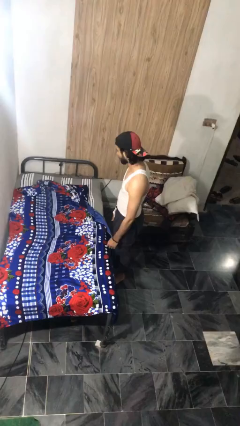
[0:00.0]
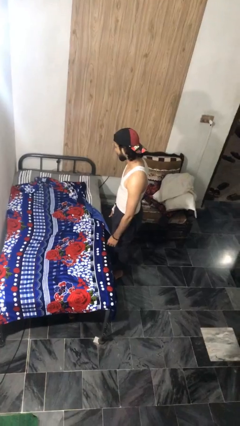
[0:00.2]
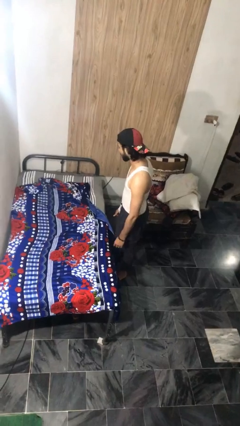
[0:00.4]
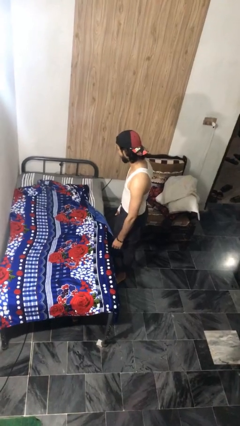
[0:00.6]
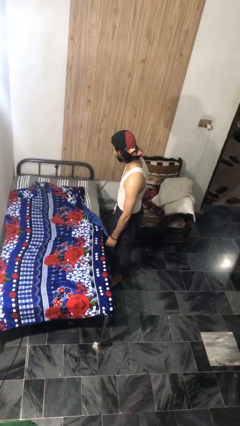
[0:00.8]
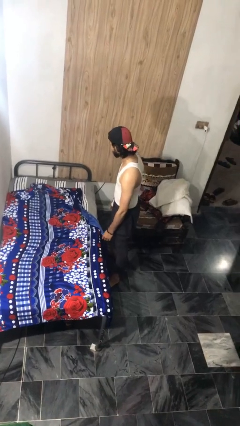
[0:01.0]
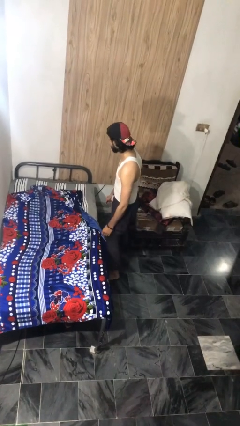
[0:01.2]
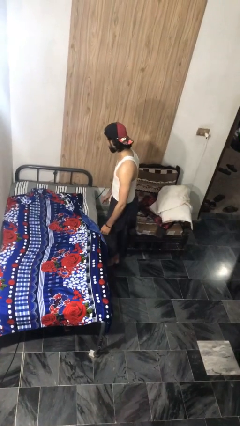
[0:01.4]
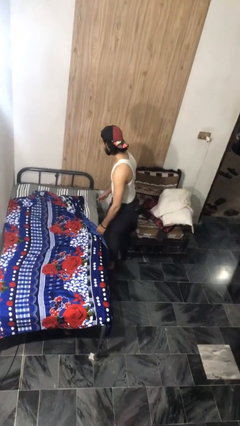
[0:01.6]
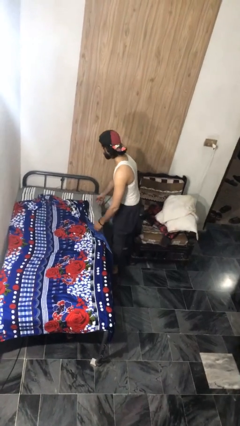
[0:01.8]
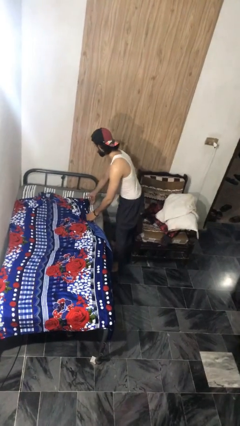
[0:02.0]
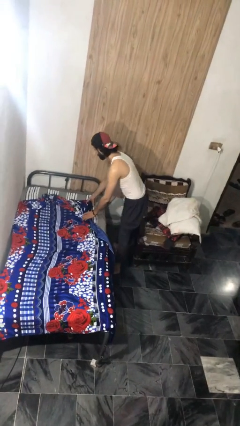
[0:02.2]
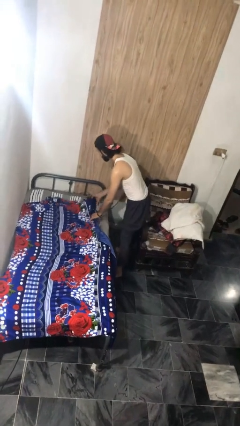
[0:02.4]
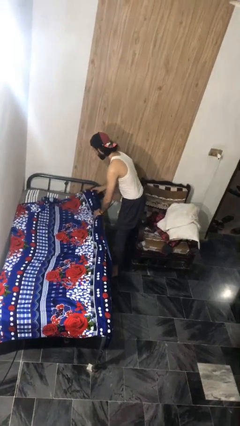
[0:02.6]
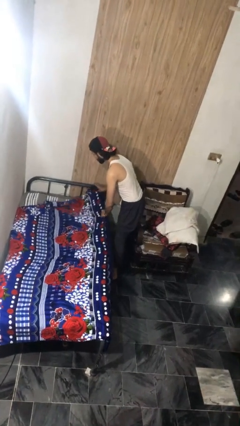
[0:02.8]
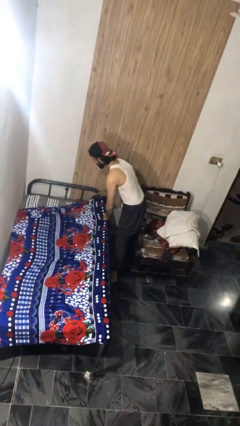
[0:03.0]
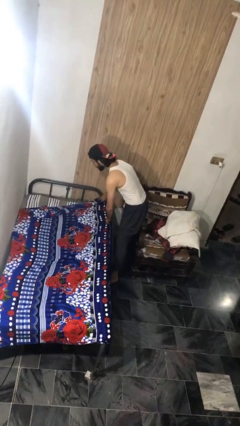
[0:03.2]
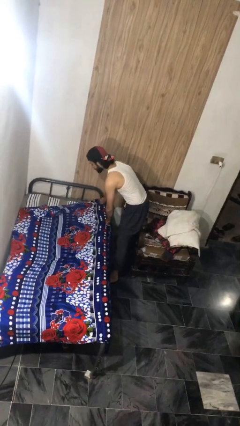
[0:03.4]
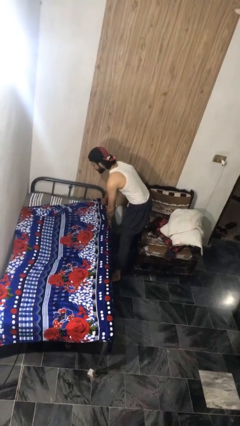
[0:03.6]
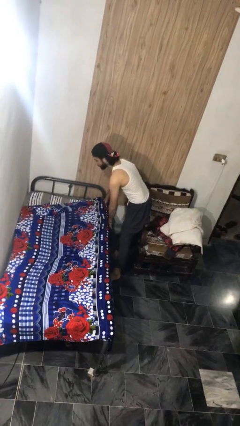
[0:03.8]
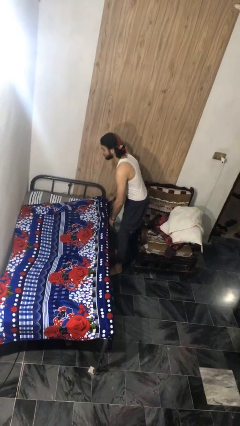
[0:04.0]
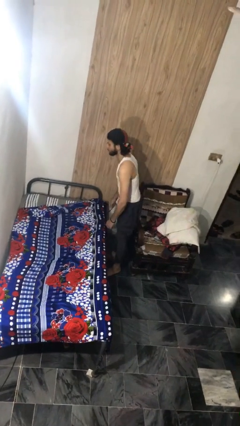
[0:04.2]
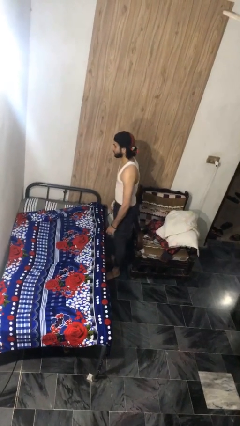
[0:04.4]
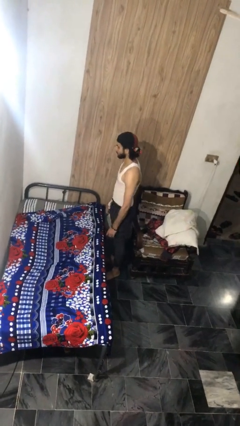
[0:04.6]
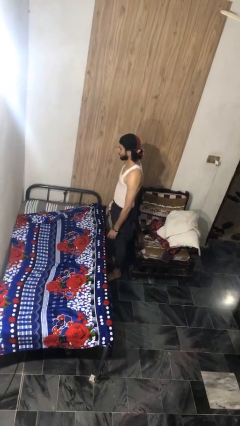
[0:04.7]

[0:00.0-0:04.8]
person makes bed

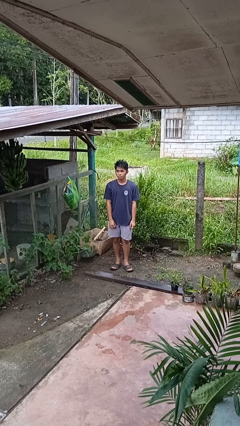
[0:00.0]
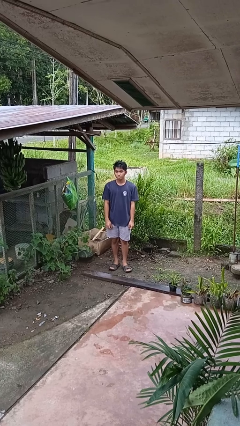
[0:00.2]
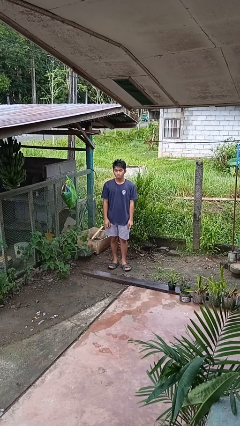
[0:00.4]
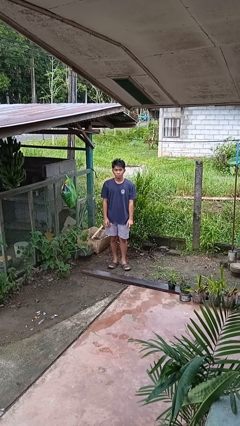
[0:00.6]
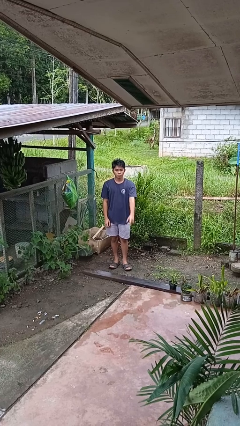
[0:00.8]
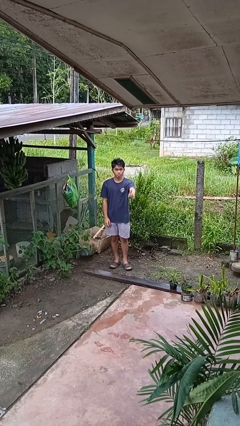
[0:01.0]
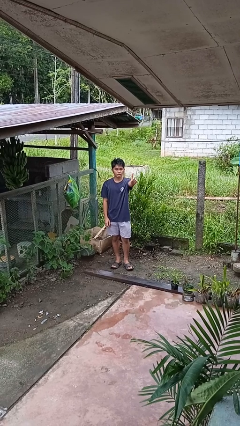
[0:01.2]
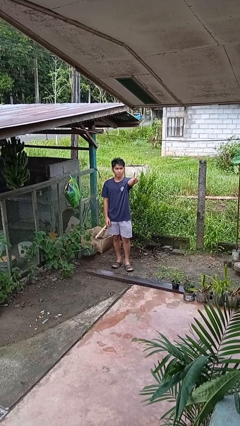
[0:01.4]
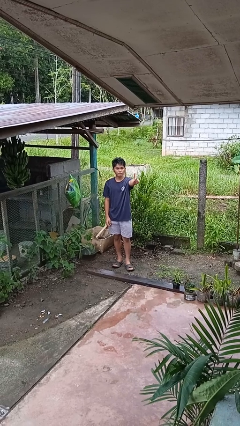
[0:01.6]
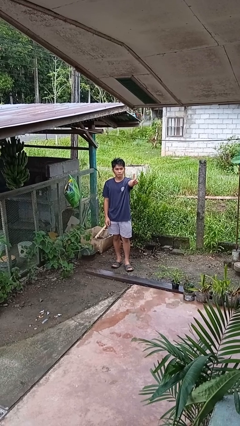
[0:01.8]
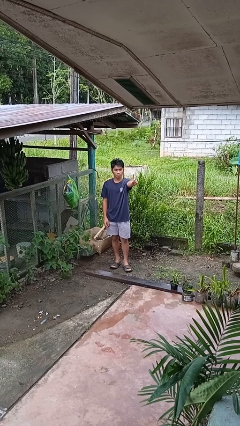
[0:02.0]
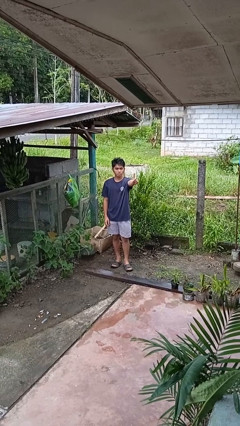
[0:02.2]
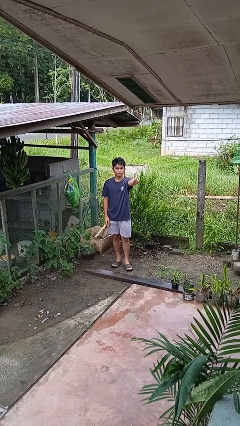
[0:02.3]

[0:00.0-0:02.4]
person gestures number one

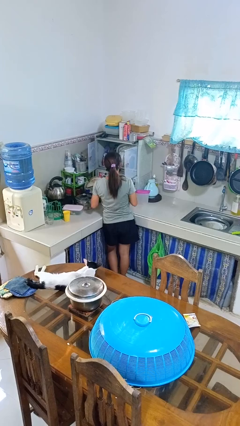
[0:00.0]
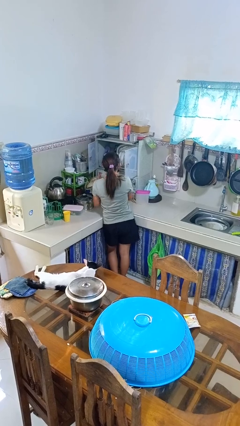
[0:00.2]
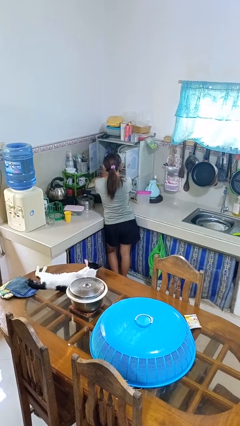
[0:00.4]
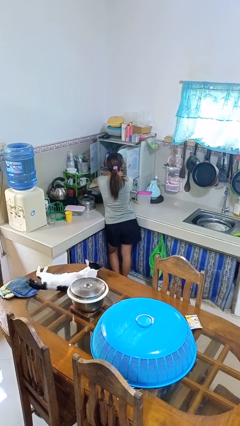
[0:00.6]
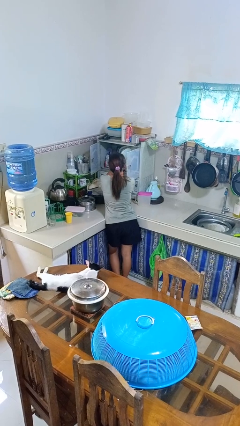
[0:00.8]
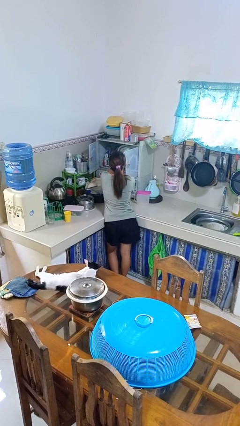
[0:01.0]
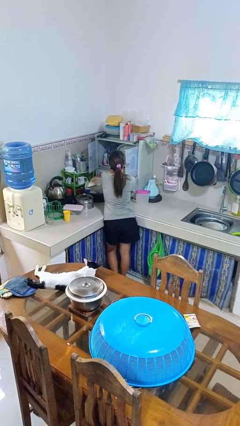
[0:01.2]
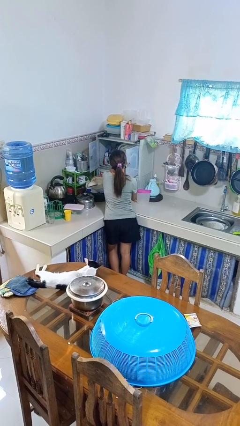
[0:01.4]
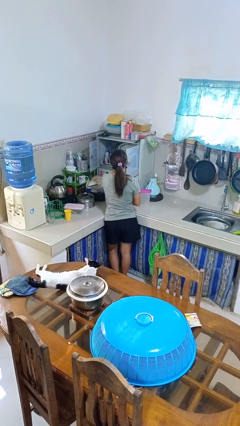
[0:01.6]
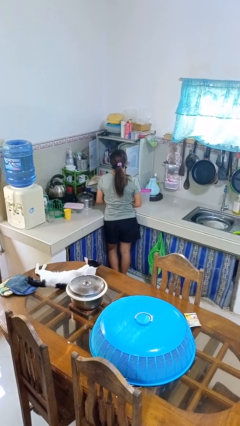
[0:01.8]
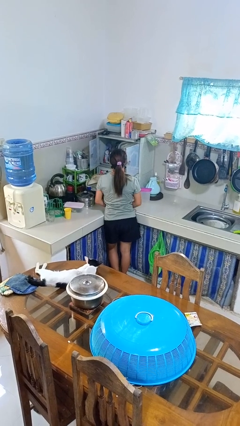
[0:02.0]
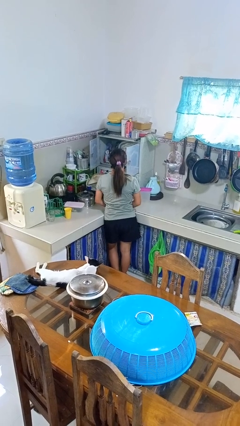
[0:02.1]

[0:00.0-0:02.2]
person puts object into kitchen drawer

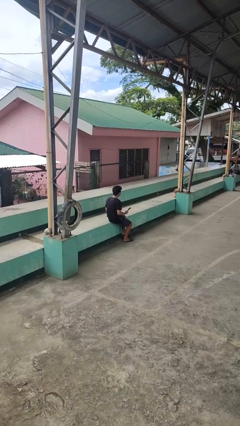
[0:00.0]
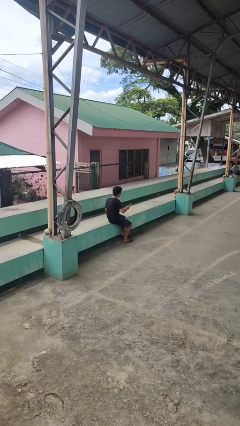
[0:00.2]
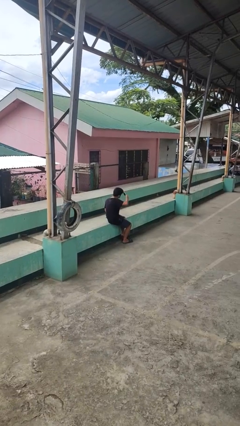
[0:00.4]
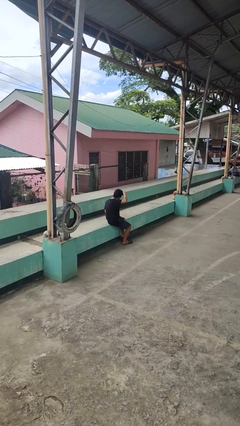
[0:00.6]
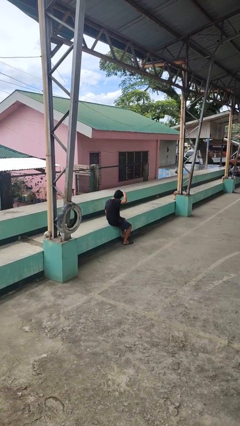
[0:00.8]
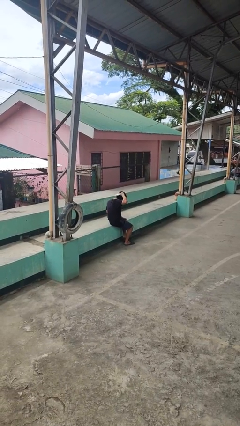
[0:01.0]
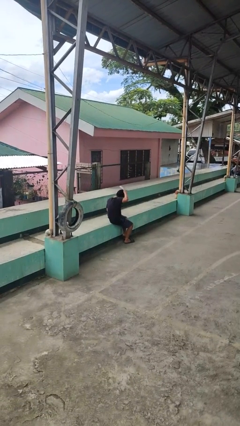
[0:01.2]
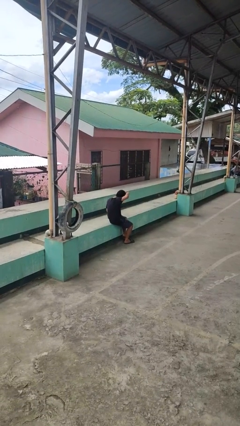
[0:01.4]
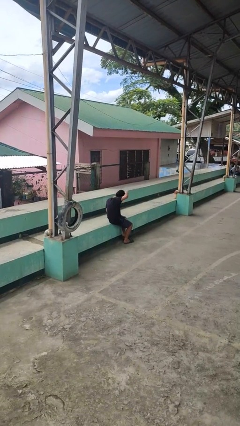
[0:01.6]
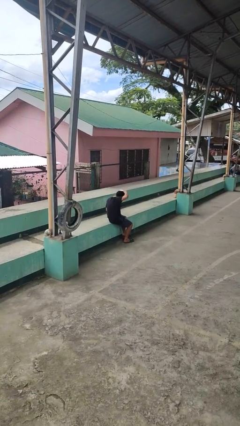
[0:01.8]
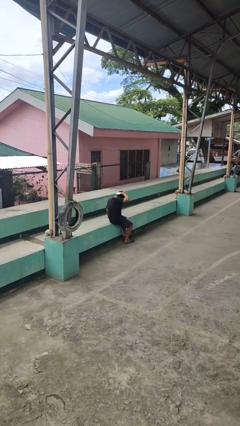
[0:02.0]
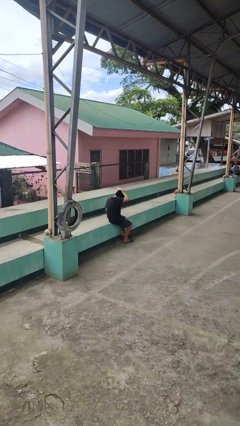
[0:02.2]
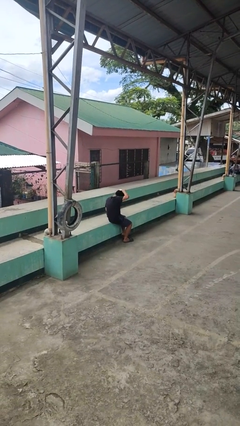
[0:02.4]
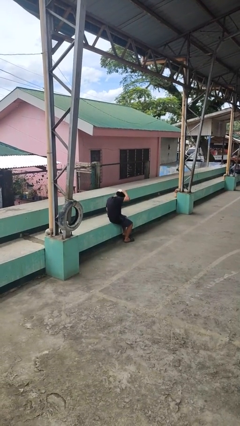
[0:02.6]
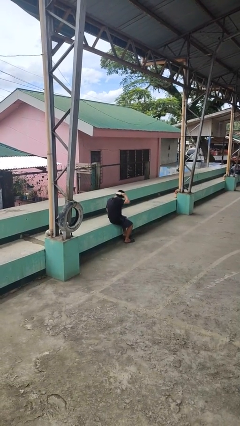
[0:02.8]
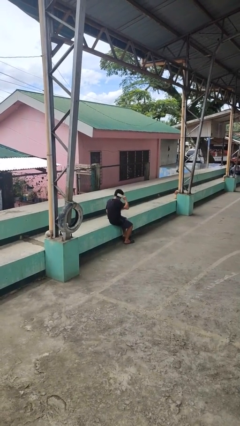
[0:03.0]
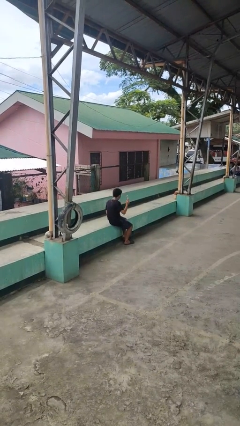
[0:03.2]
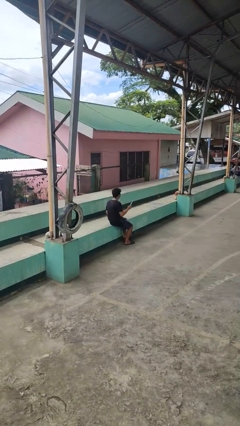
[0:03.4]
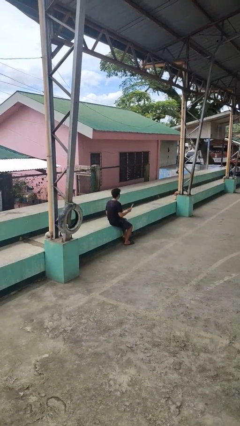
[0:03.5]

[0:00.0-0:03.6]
person brushes hair

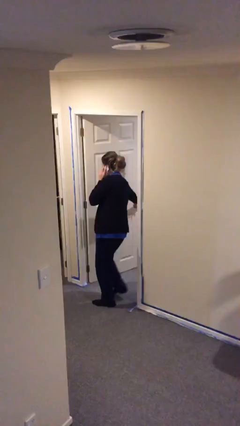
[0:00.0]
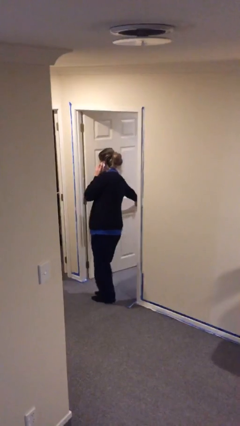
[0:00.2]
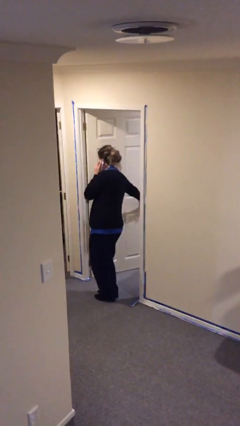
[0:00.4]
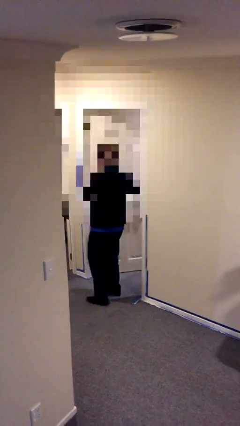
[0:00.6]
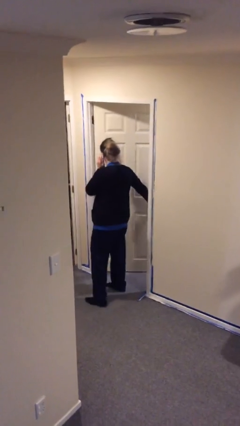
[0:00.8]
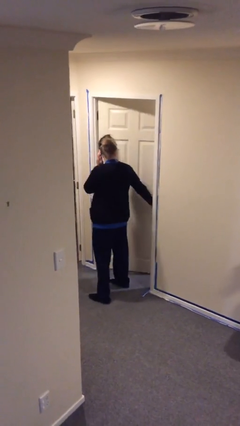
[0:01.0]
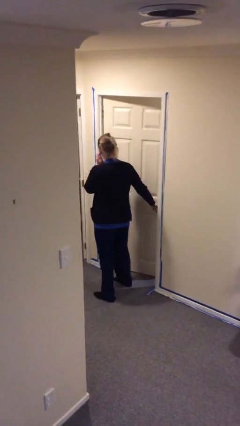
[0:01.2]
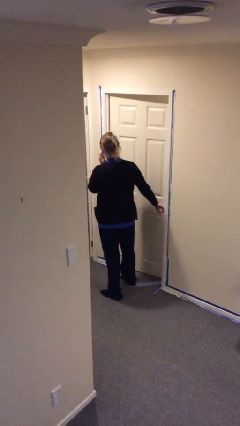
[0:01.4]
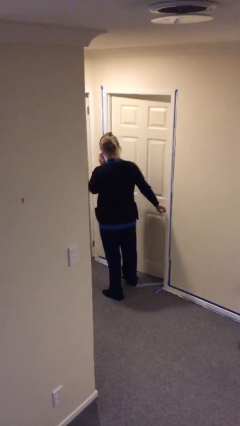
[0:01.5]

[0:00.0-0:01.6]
person closes facility door

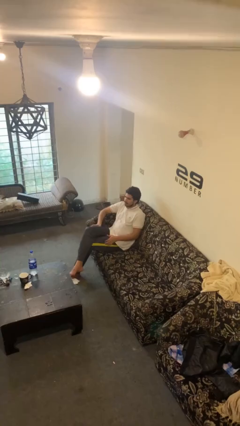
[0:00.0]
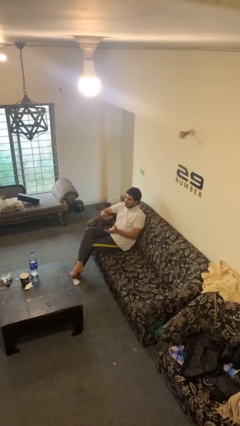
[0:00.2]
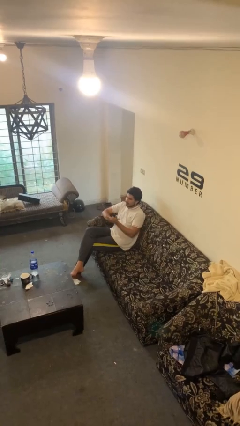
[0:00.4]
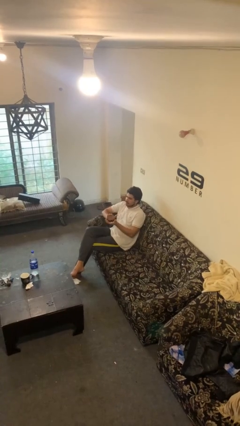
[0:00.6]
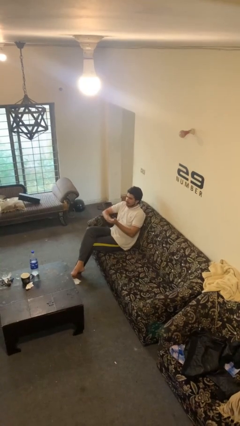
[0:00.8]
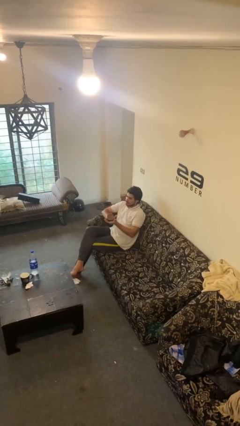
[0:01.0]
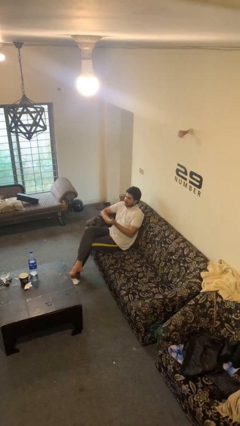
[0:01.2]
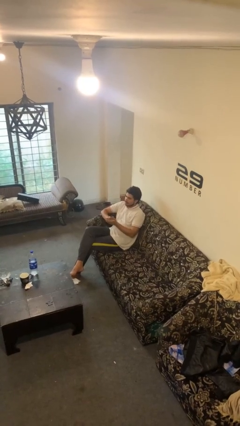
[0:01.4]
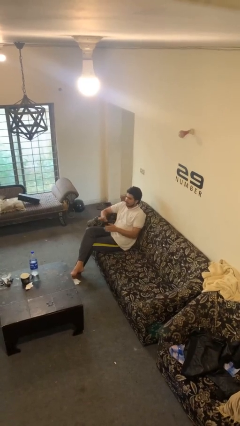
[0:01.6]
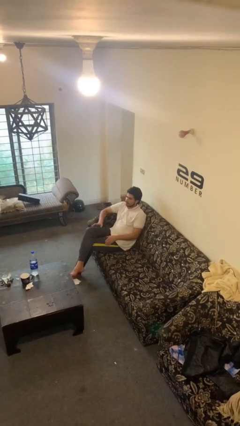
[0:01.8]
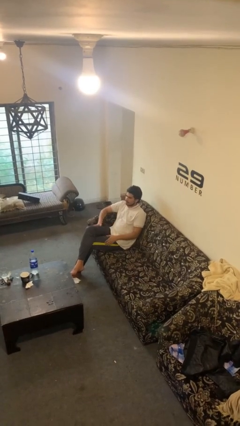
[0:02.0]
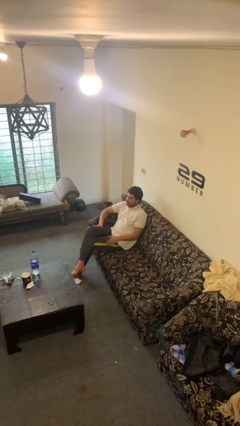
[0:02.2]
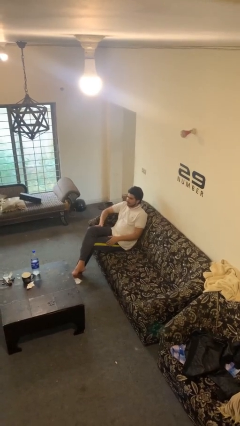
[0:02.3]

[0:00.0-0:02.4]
person claps hands

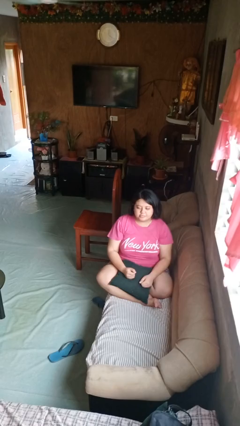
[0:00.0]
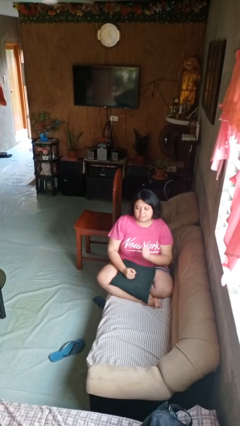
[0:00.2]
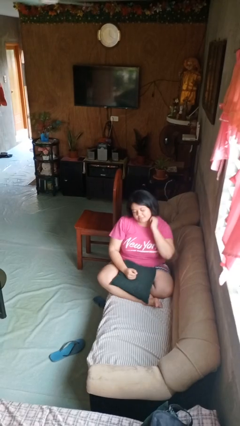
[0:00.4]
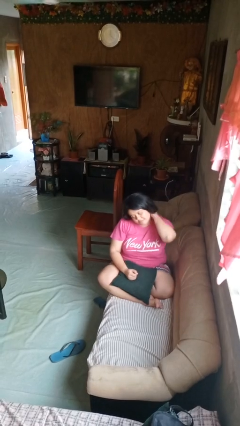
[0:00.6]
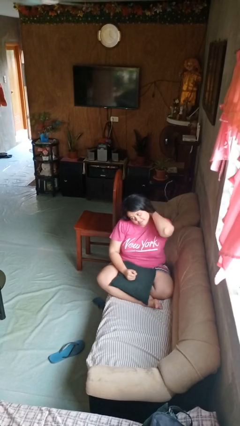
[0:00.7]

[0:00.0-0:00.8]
person rubs neck
